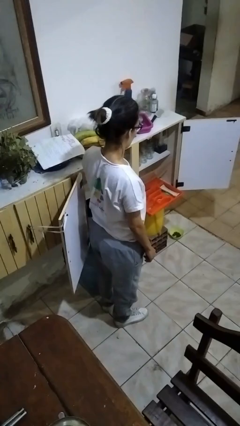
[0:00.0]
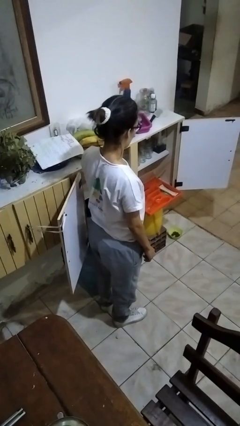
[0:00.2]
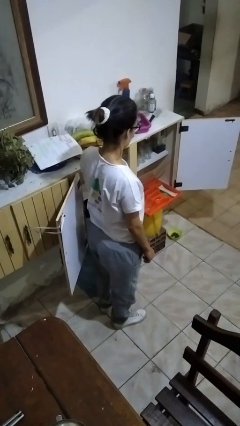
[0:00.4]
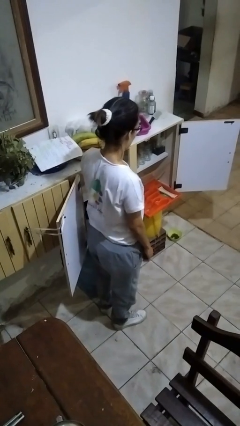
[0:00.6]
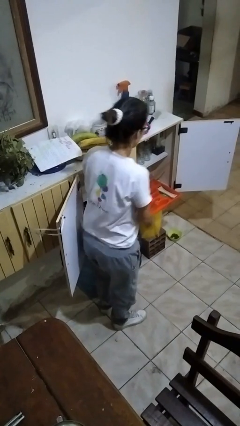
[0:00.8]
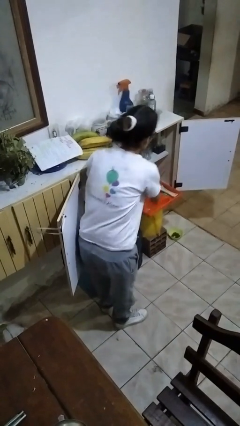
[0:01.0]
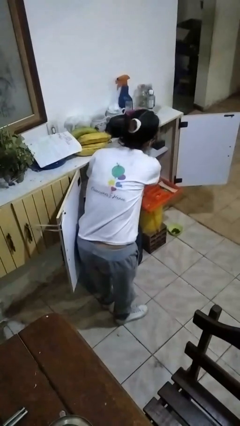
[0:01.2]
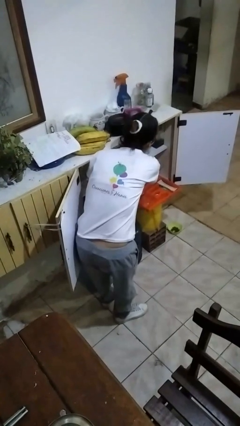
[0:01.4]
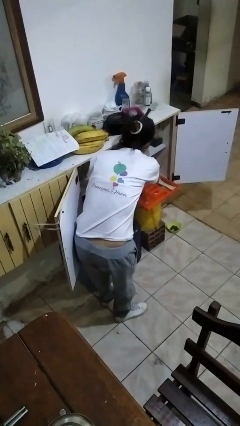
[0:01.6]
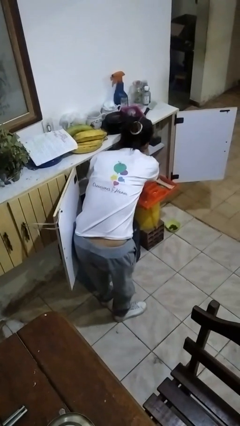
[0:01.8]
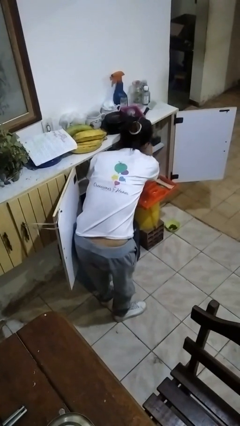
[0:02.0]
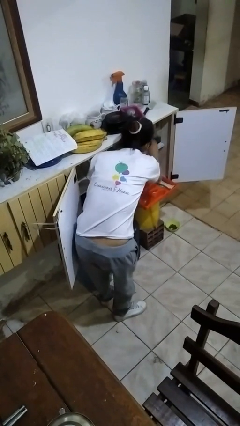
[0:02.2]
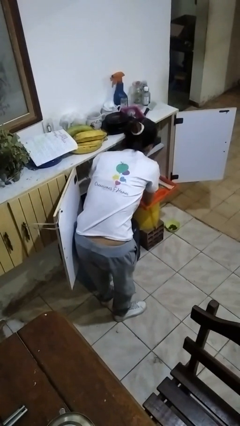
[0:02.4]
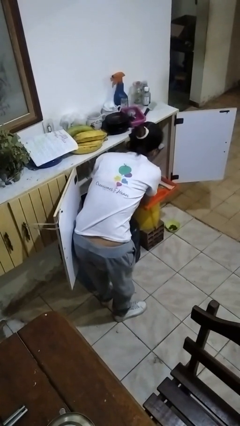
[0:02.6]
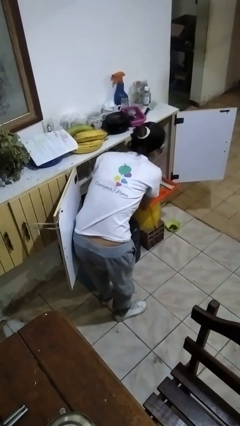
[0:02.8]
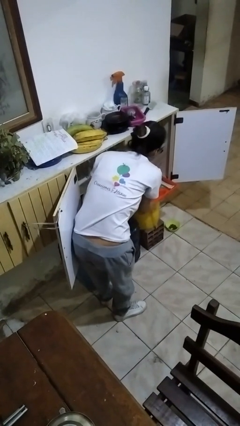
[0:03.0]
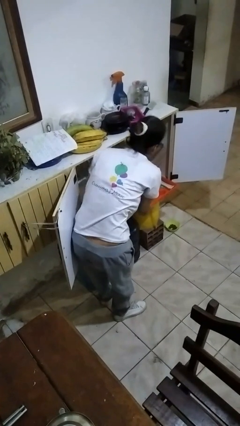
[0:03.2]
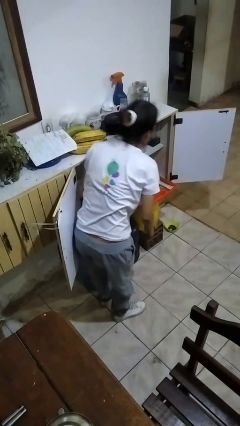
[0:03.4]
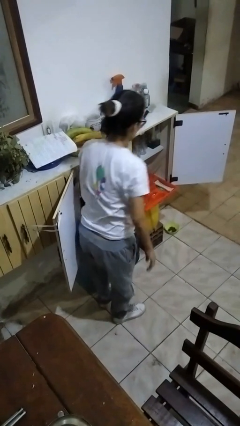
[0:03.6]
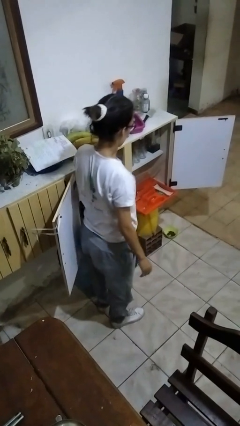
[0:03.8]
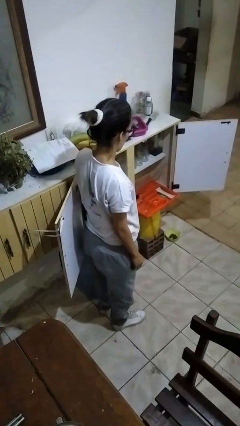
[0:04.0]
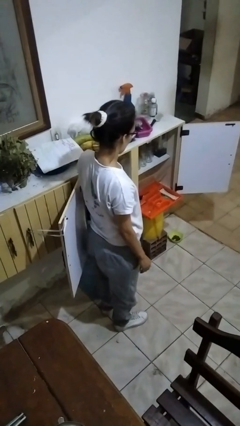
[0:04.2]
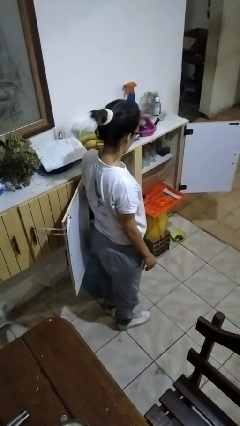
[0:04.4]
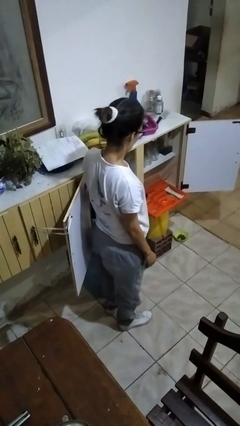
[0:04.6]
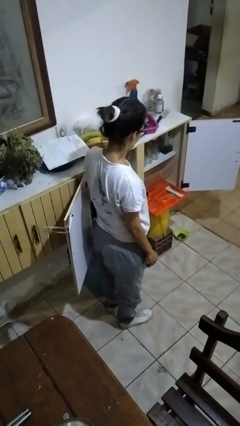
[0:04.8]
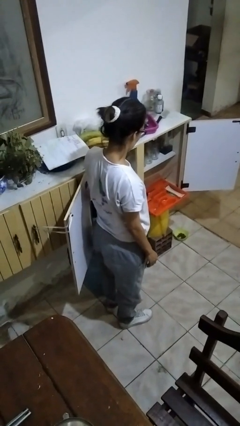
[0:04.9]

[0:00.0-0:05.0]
person searches in kitchen drawer

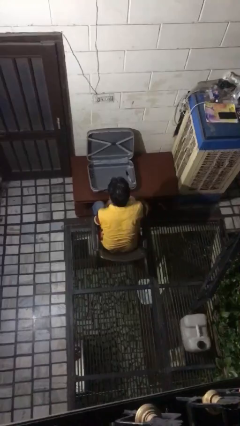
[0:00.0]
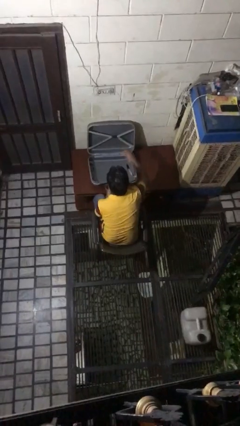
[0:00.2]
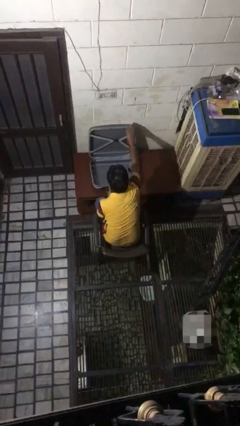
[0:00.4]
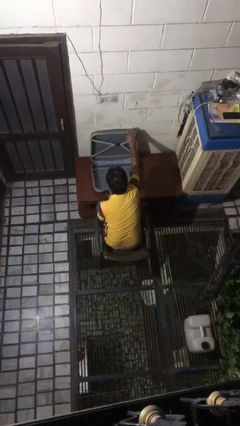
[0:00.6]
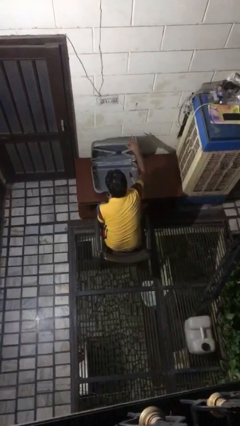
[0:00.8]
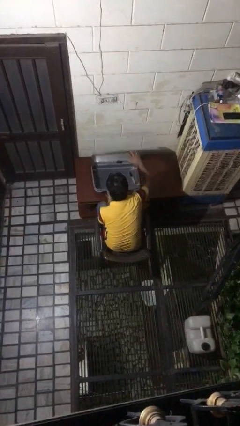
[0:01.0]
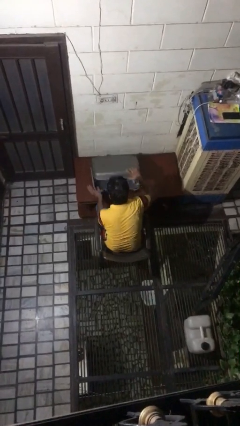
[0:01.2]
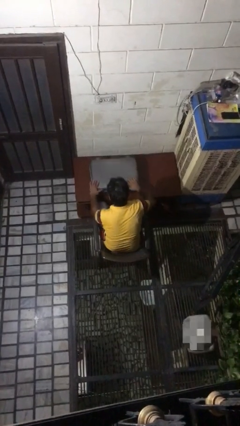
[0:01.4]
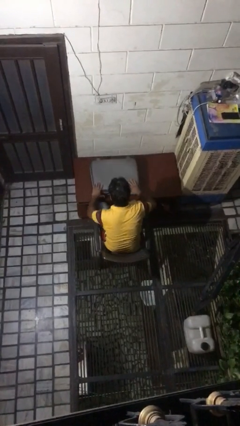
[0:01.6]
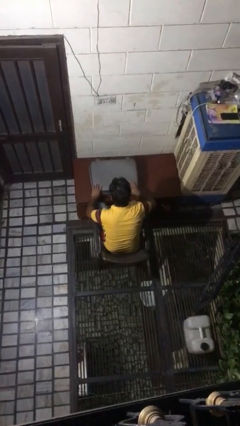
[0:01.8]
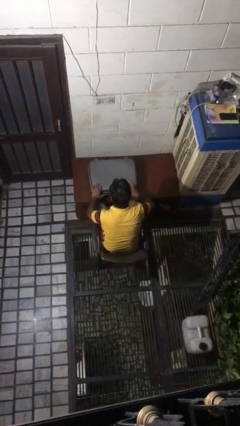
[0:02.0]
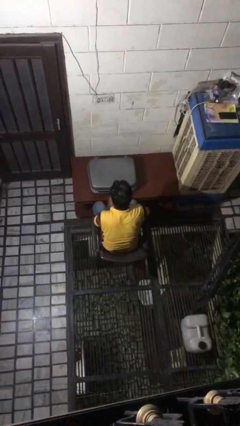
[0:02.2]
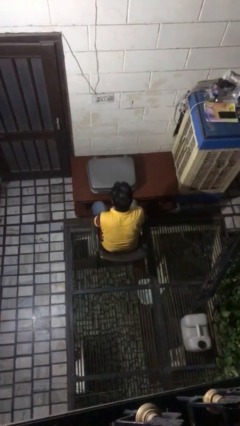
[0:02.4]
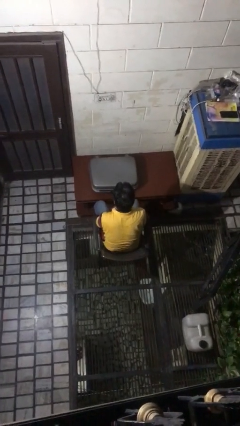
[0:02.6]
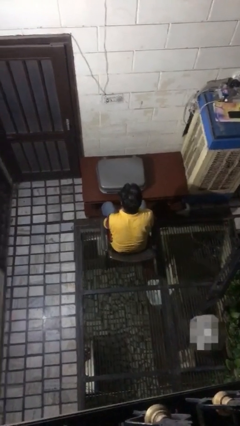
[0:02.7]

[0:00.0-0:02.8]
person closes suitcase

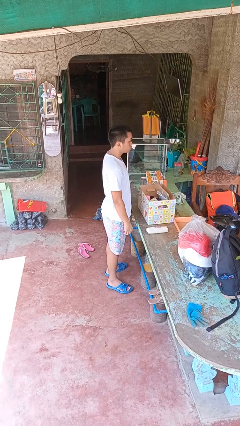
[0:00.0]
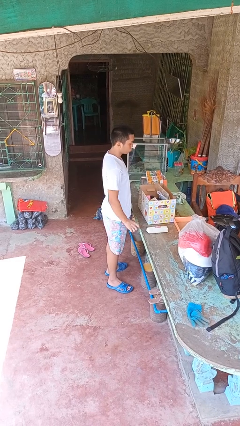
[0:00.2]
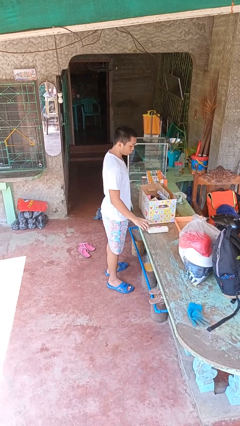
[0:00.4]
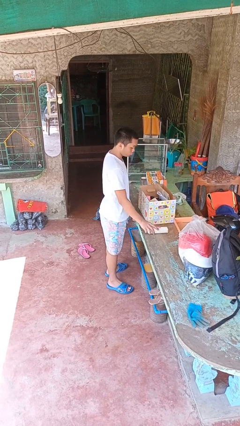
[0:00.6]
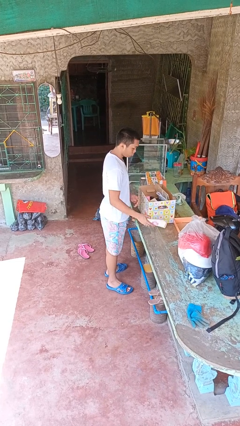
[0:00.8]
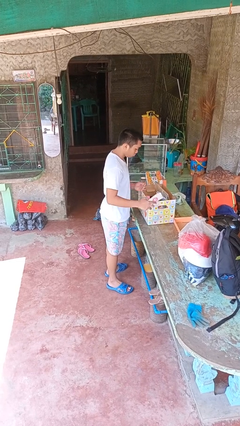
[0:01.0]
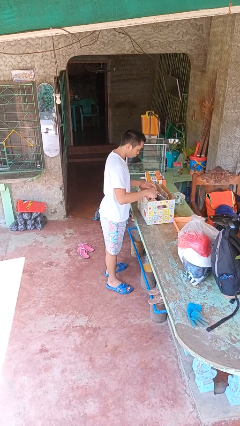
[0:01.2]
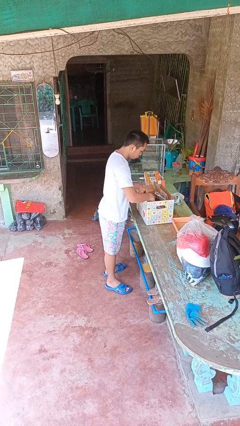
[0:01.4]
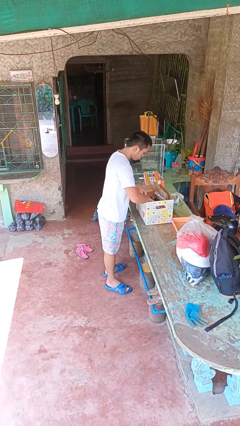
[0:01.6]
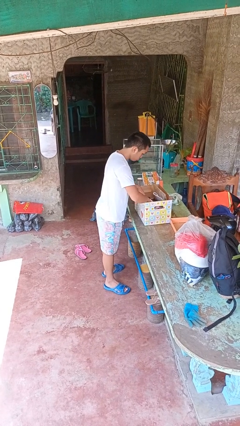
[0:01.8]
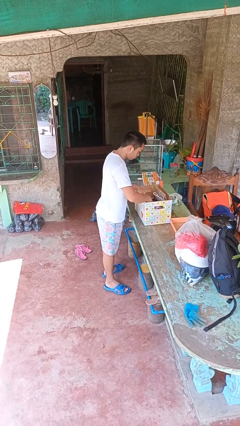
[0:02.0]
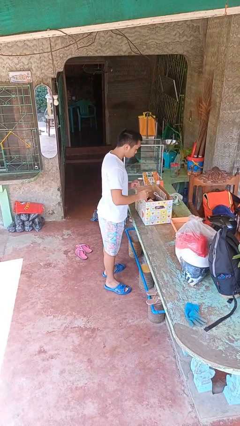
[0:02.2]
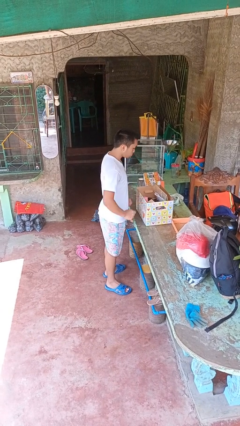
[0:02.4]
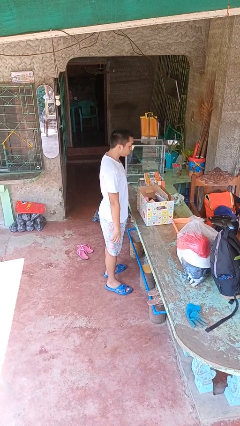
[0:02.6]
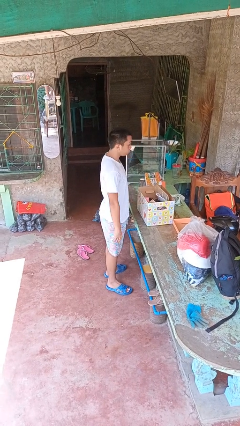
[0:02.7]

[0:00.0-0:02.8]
person puts object into box

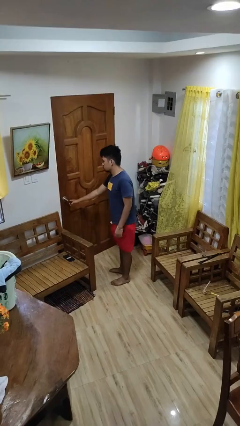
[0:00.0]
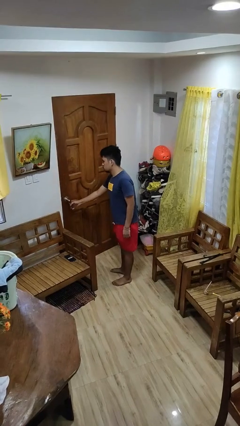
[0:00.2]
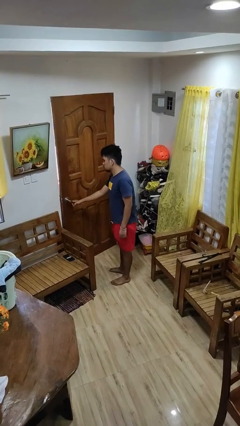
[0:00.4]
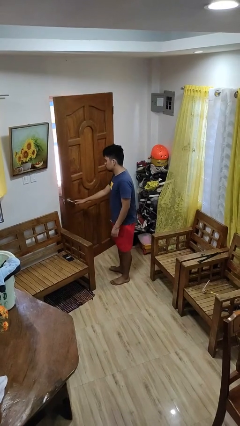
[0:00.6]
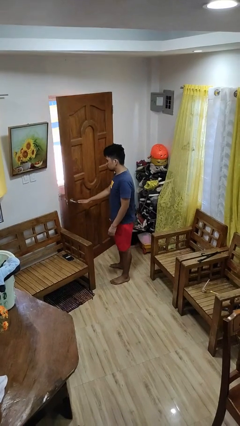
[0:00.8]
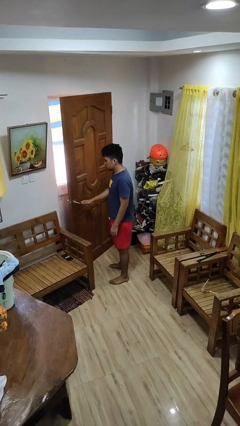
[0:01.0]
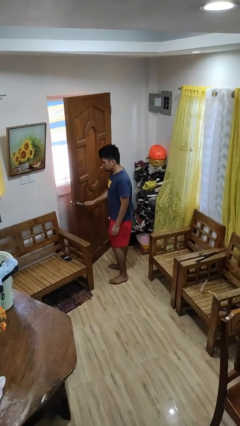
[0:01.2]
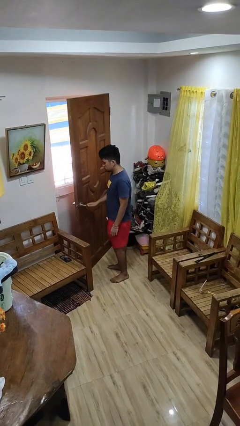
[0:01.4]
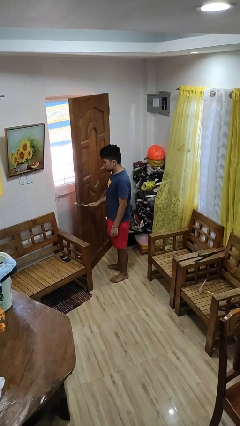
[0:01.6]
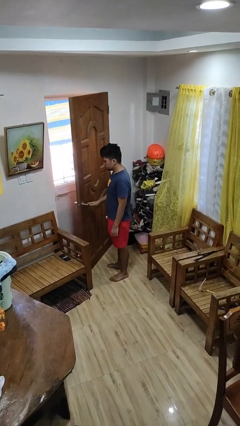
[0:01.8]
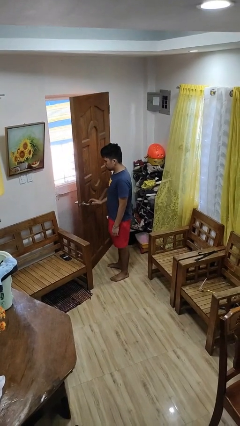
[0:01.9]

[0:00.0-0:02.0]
person opens facility door

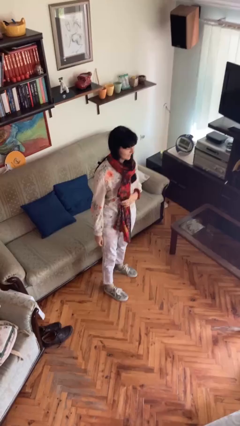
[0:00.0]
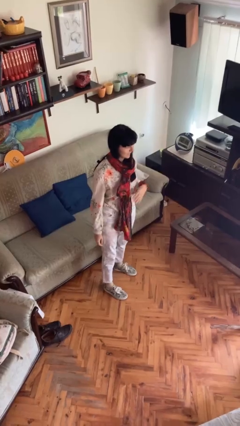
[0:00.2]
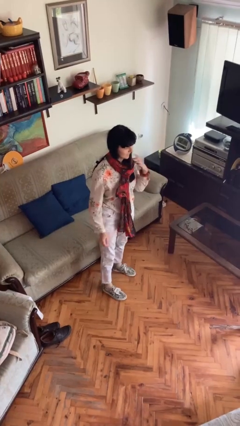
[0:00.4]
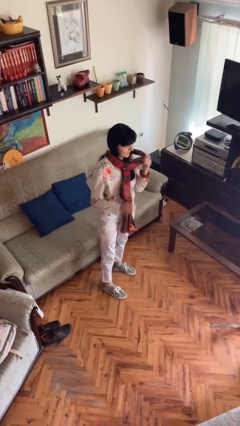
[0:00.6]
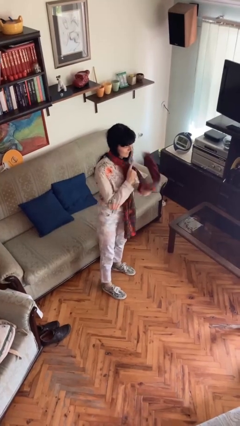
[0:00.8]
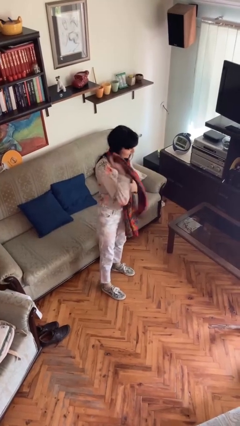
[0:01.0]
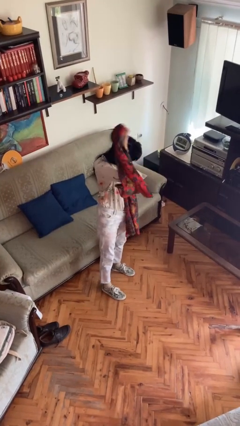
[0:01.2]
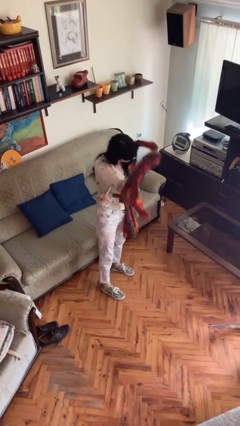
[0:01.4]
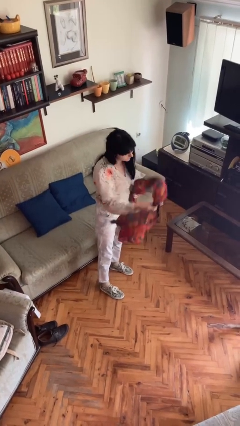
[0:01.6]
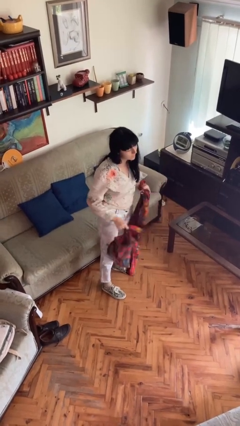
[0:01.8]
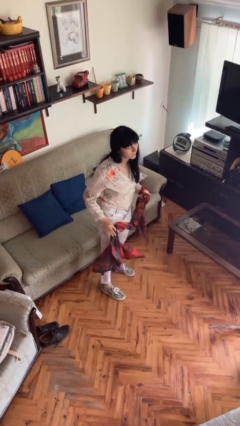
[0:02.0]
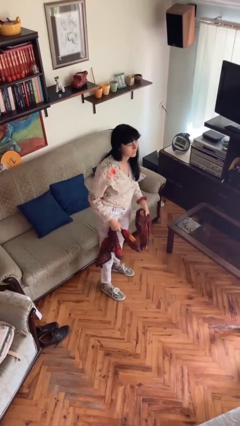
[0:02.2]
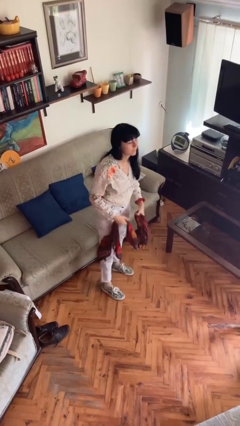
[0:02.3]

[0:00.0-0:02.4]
person takes off scarf

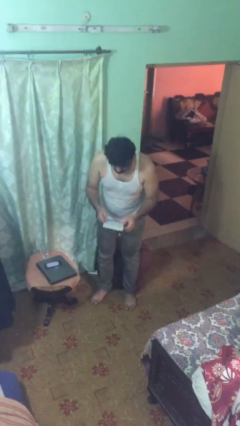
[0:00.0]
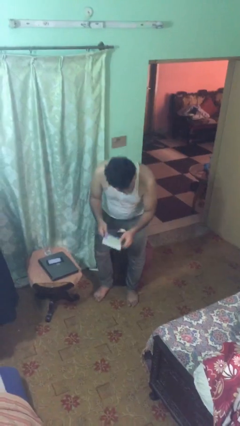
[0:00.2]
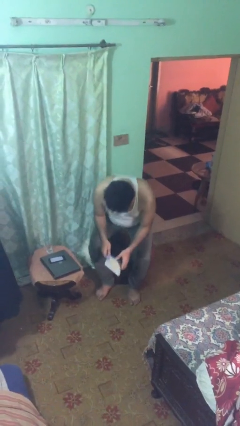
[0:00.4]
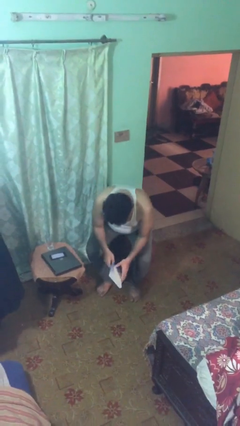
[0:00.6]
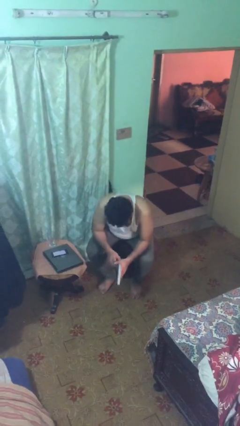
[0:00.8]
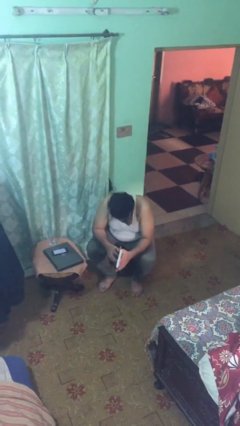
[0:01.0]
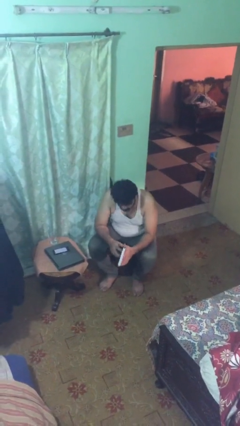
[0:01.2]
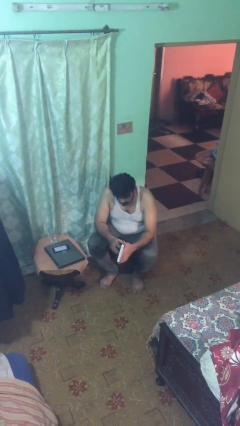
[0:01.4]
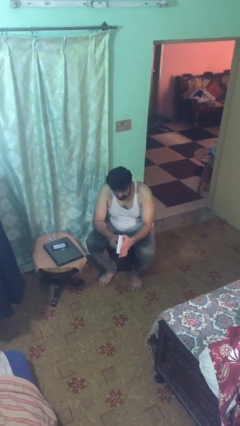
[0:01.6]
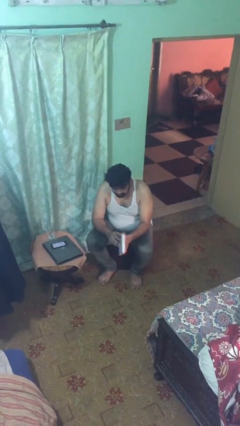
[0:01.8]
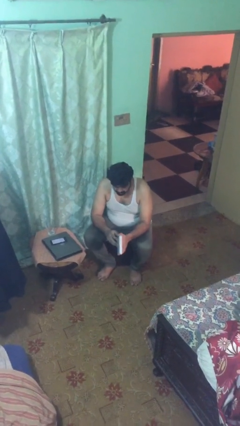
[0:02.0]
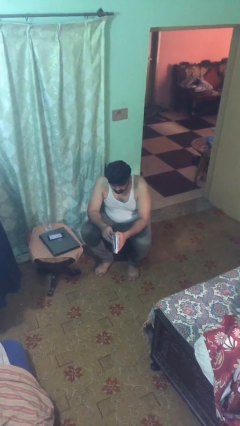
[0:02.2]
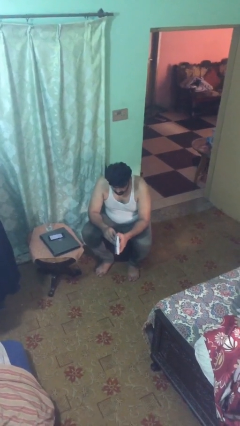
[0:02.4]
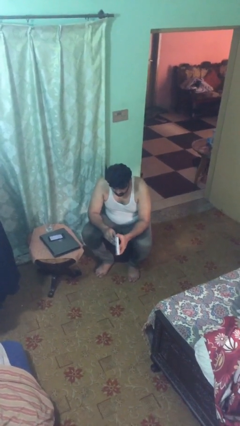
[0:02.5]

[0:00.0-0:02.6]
person sits down
